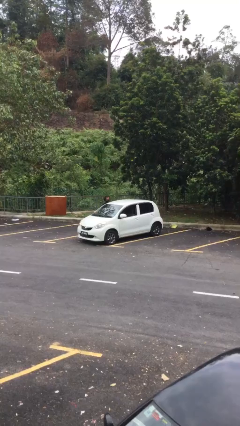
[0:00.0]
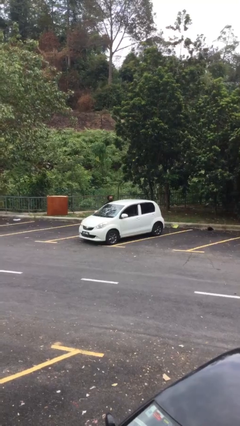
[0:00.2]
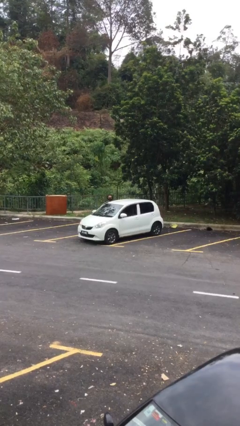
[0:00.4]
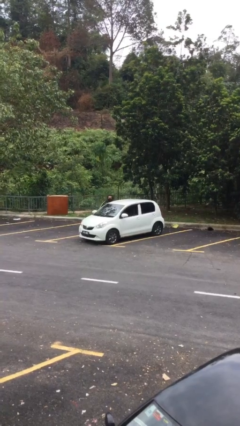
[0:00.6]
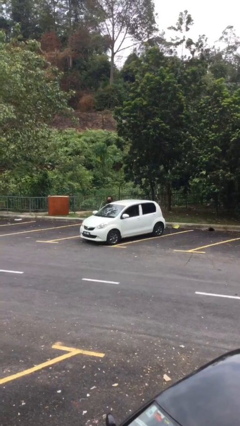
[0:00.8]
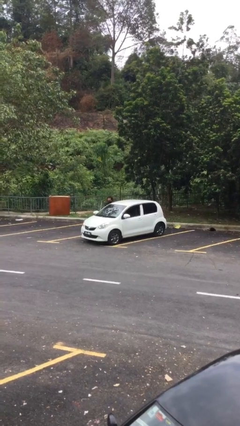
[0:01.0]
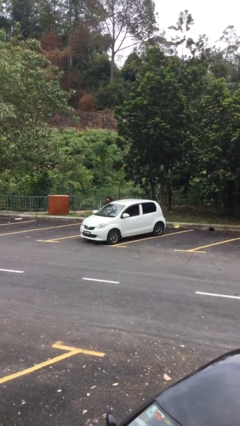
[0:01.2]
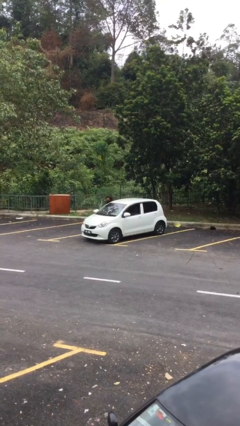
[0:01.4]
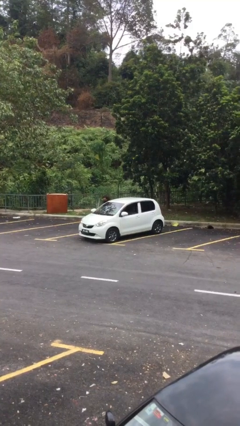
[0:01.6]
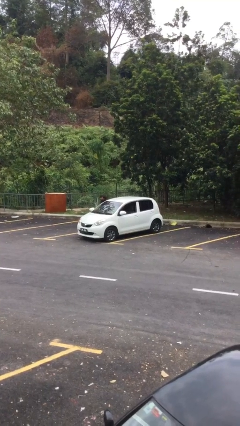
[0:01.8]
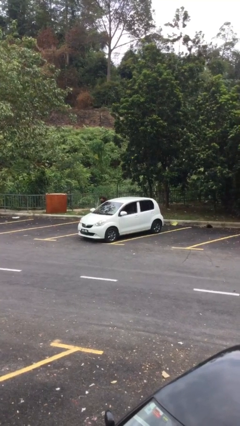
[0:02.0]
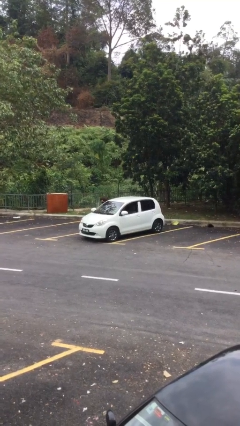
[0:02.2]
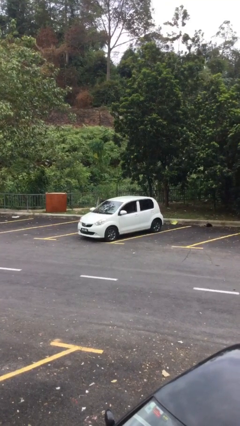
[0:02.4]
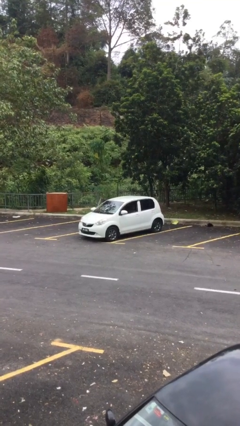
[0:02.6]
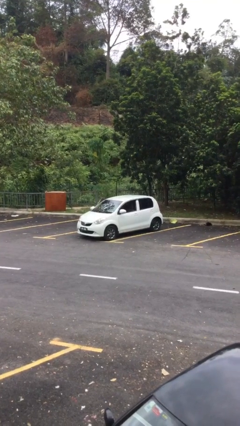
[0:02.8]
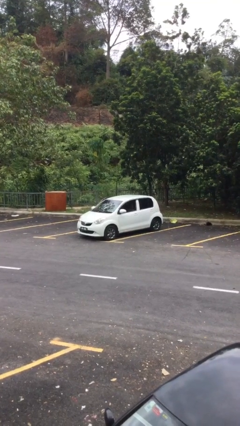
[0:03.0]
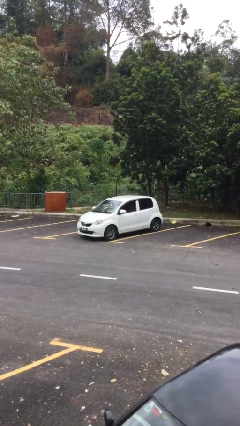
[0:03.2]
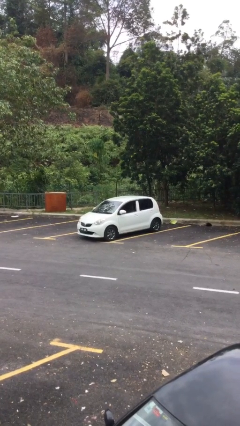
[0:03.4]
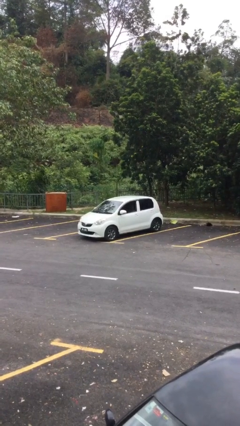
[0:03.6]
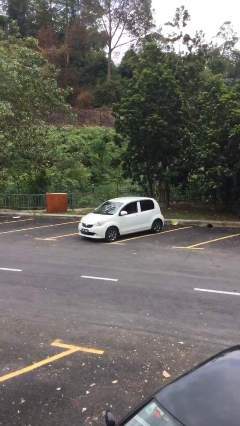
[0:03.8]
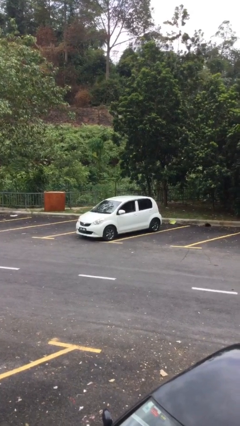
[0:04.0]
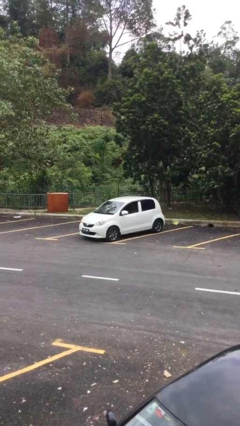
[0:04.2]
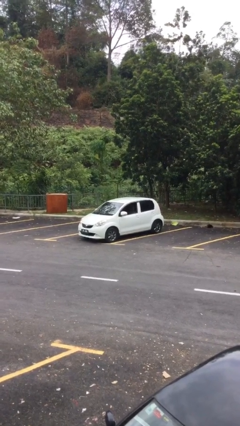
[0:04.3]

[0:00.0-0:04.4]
car picks up person

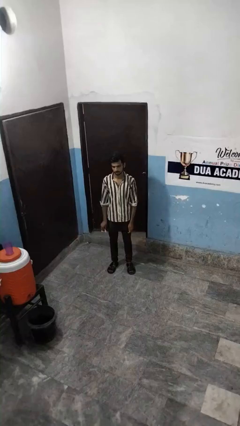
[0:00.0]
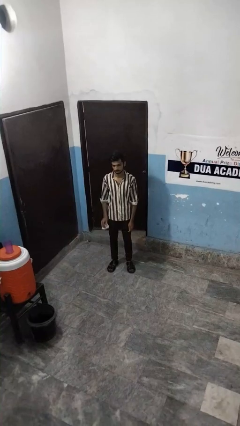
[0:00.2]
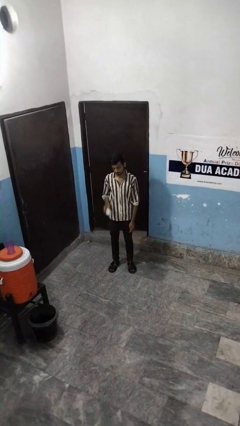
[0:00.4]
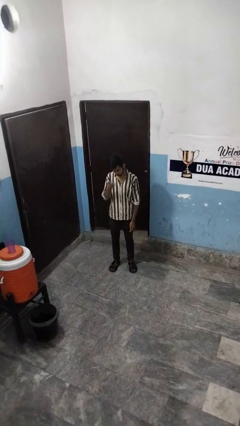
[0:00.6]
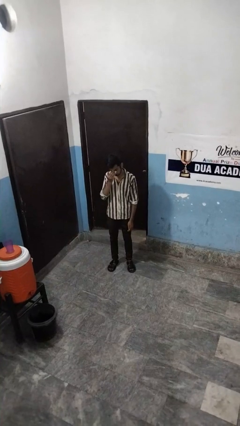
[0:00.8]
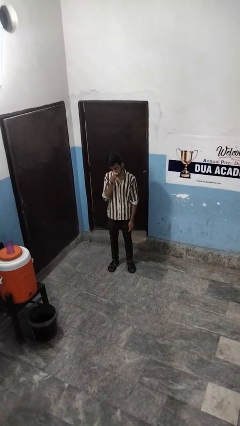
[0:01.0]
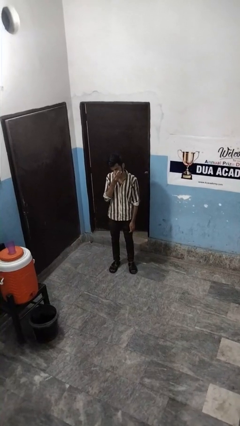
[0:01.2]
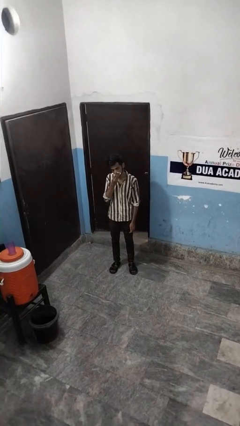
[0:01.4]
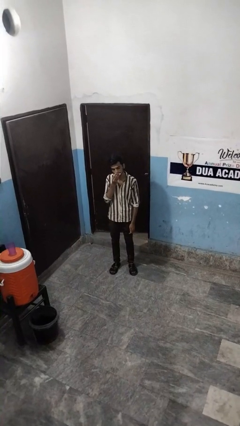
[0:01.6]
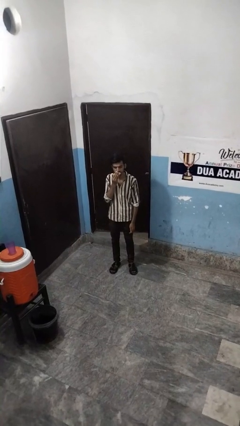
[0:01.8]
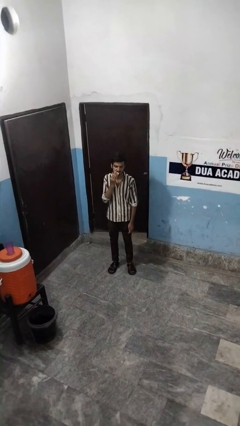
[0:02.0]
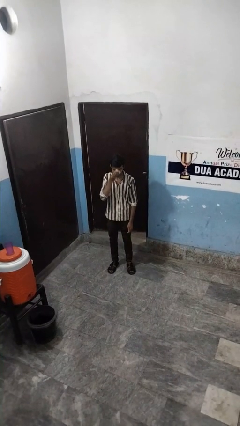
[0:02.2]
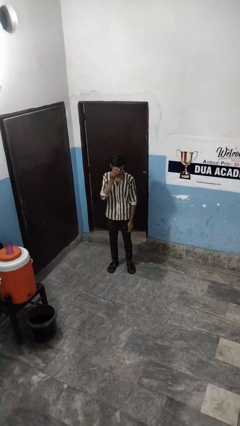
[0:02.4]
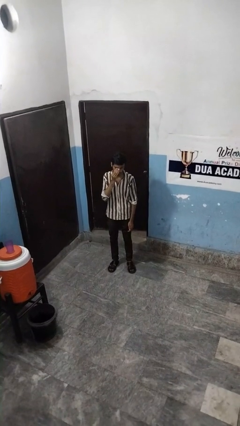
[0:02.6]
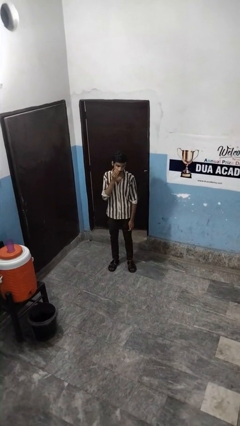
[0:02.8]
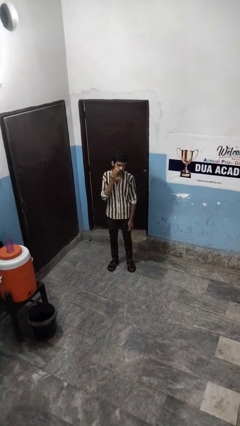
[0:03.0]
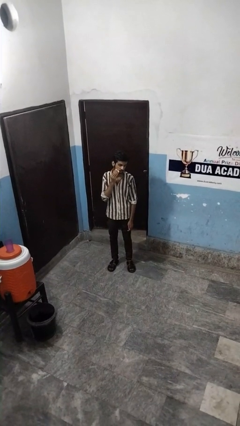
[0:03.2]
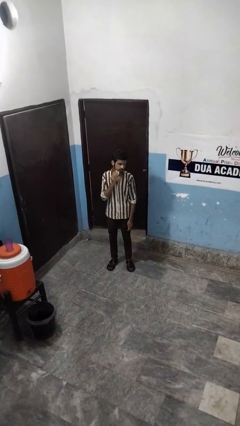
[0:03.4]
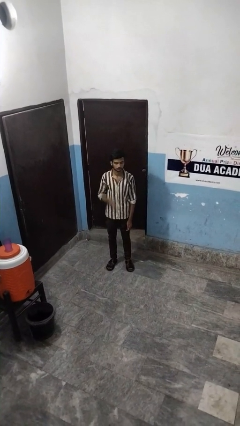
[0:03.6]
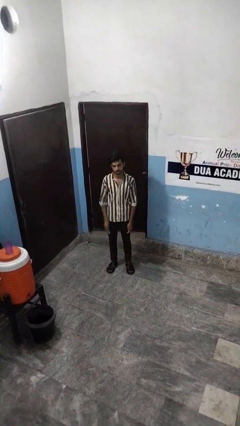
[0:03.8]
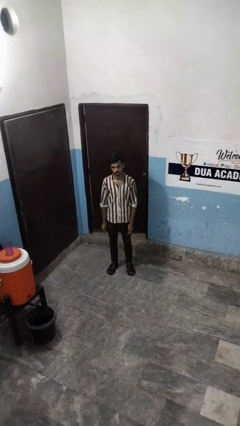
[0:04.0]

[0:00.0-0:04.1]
person wipes mouth with napkin

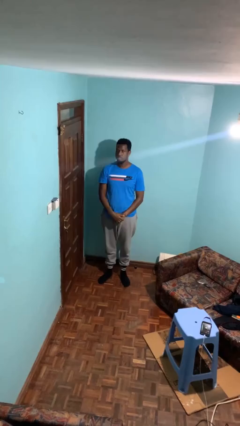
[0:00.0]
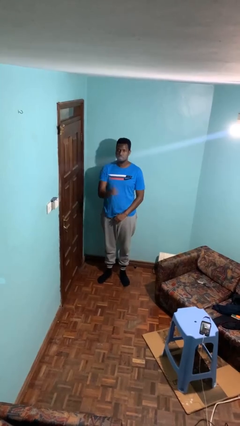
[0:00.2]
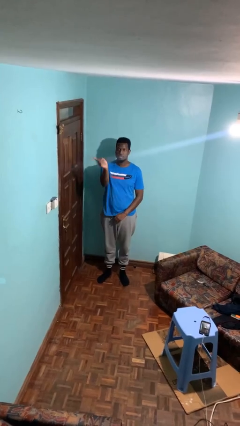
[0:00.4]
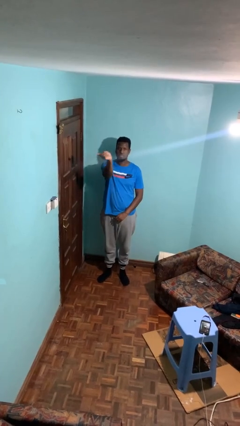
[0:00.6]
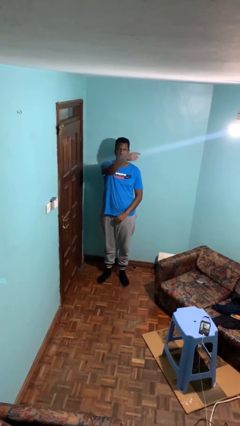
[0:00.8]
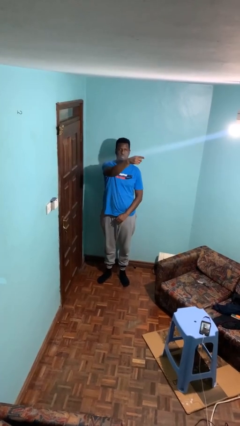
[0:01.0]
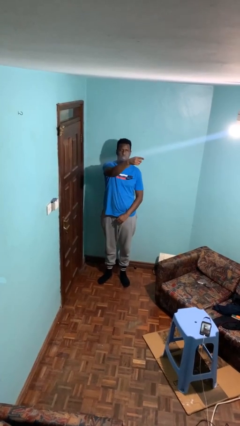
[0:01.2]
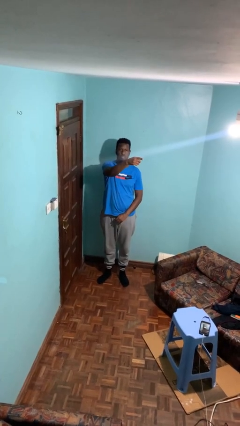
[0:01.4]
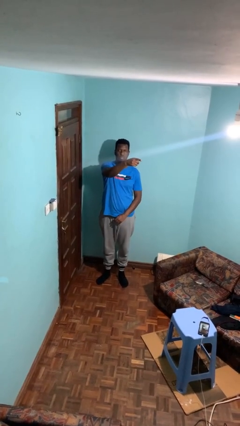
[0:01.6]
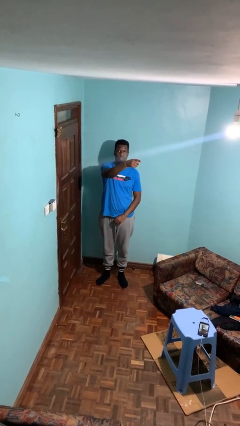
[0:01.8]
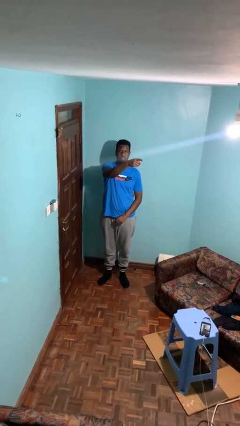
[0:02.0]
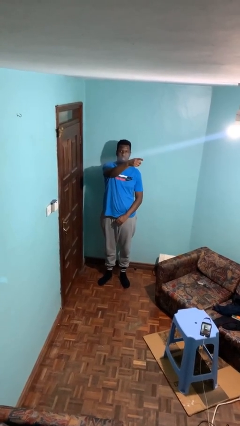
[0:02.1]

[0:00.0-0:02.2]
person gestures swipe left

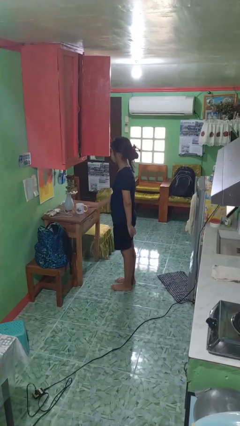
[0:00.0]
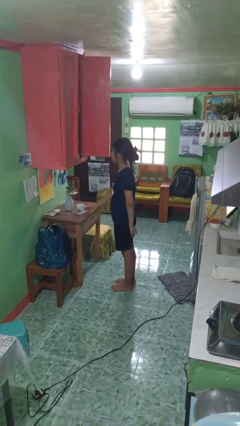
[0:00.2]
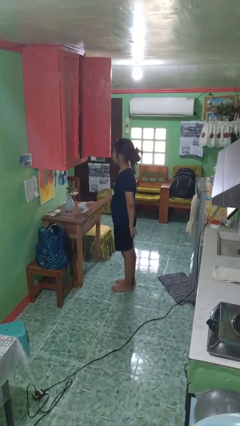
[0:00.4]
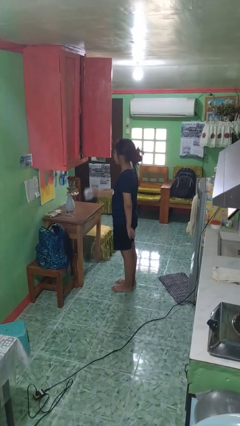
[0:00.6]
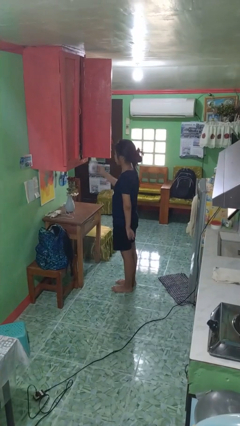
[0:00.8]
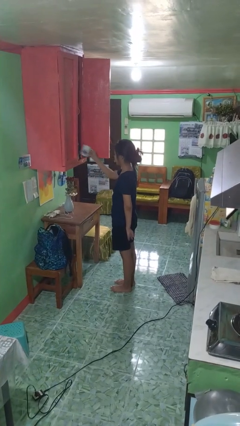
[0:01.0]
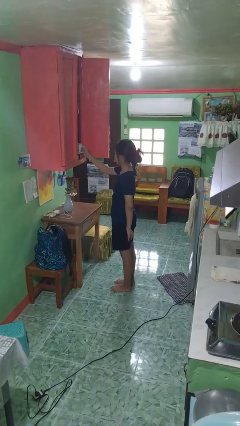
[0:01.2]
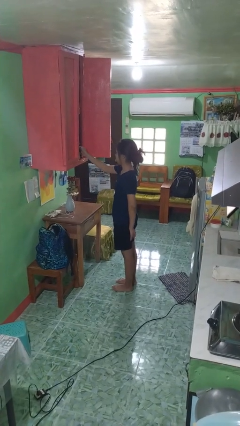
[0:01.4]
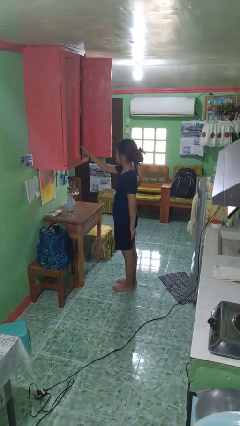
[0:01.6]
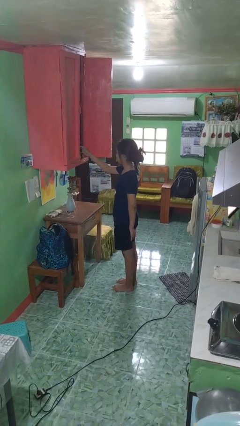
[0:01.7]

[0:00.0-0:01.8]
person puts object in cabinet

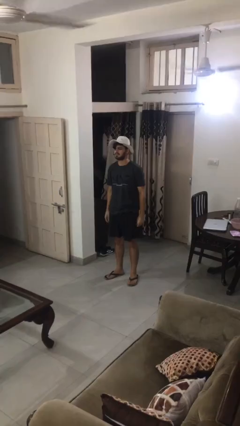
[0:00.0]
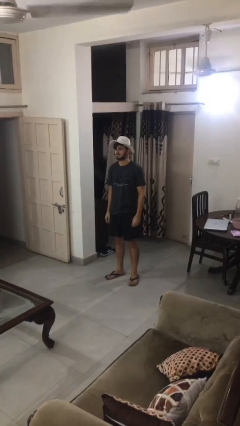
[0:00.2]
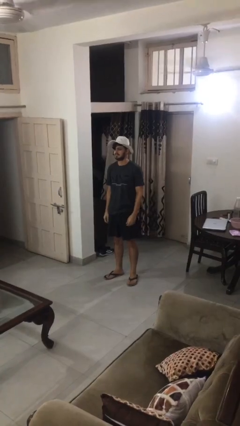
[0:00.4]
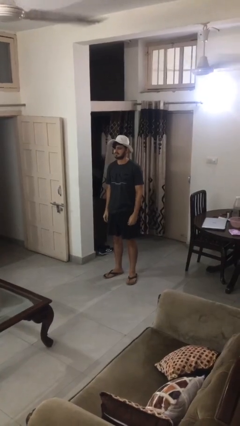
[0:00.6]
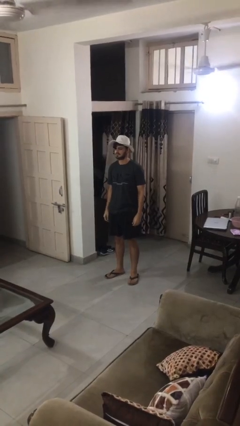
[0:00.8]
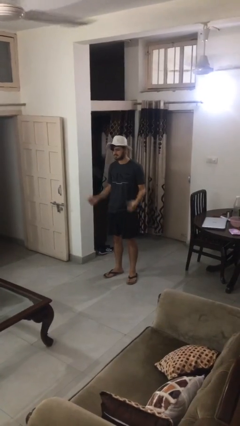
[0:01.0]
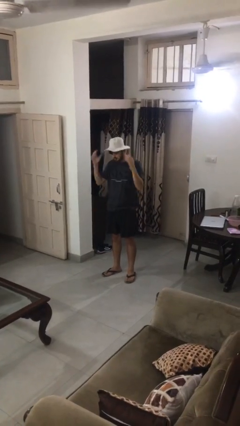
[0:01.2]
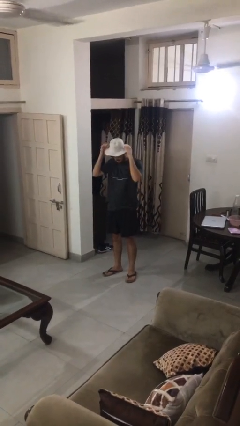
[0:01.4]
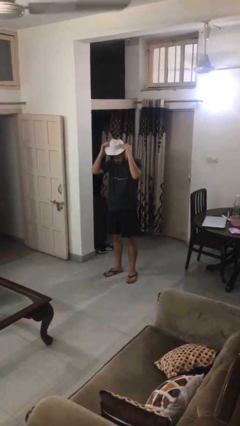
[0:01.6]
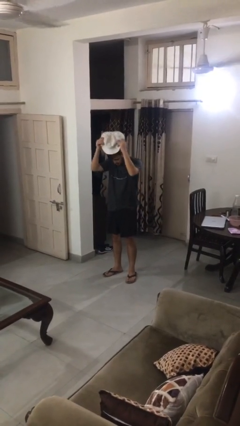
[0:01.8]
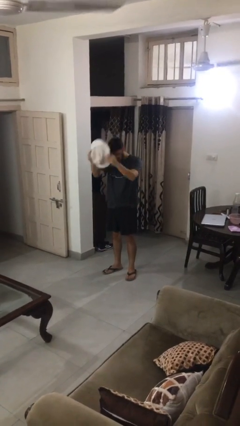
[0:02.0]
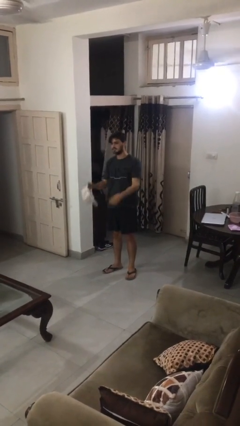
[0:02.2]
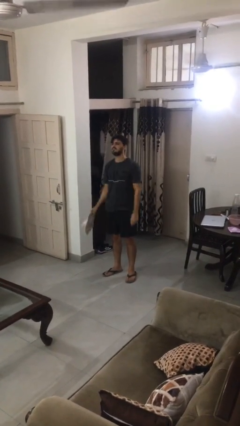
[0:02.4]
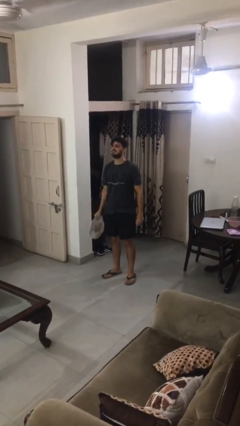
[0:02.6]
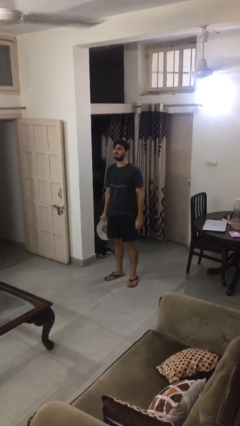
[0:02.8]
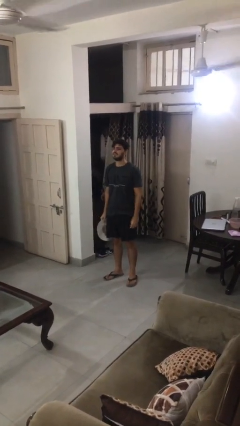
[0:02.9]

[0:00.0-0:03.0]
person takes off hat

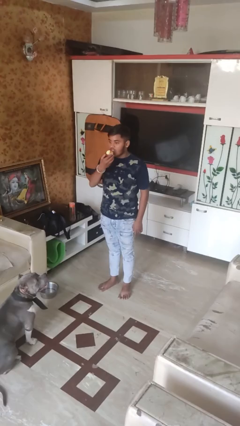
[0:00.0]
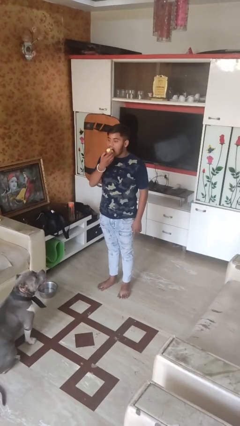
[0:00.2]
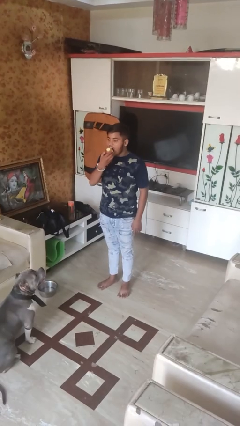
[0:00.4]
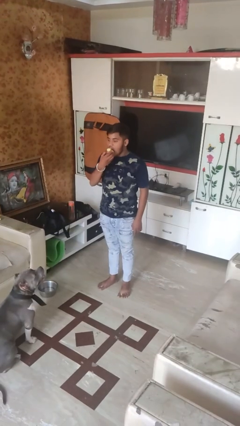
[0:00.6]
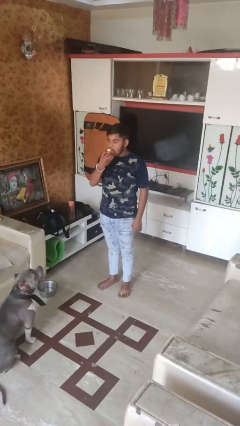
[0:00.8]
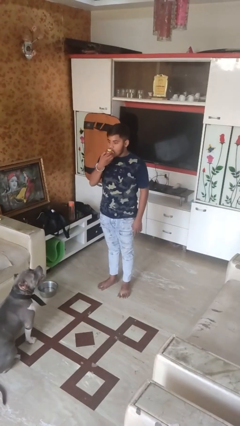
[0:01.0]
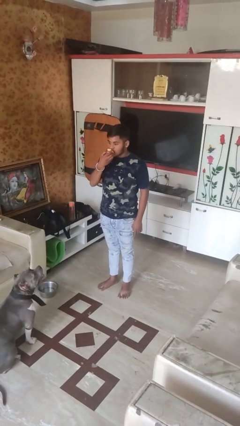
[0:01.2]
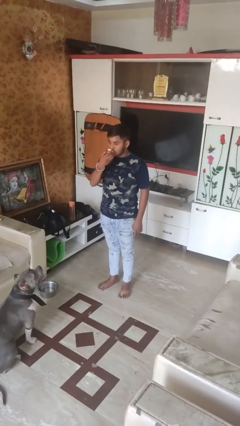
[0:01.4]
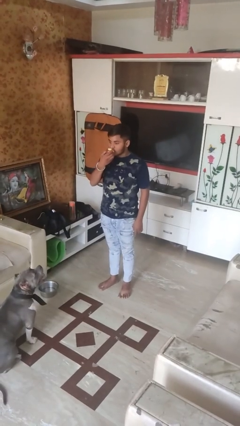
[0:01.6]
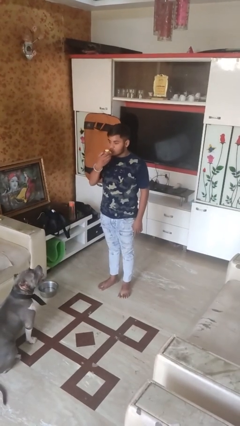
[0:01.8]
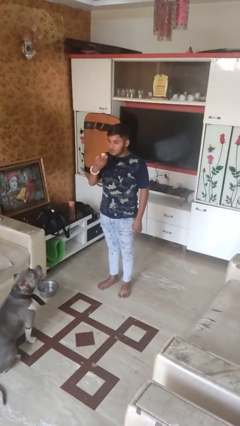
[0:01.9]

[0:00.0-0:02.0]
person eats apple
